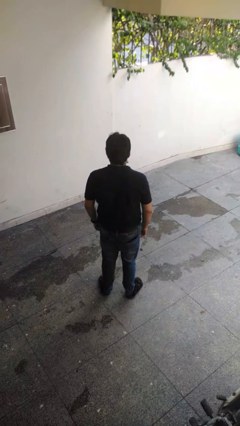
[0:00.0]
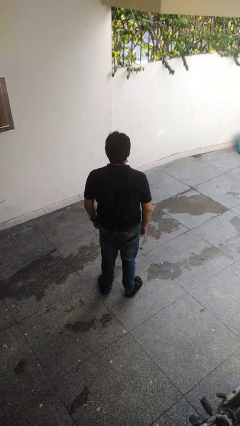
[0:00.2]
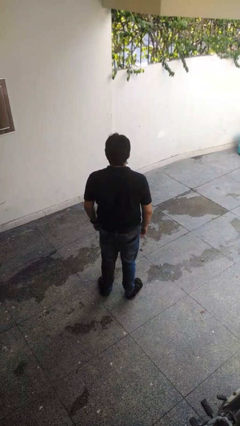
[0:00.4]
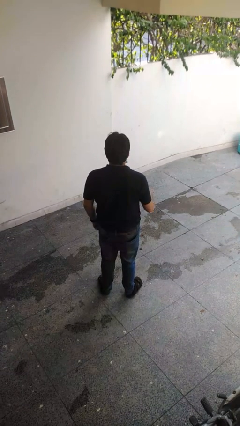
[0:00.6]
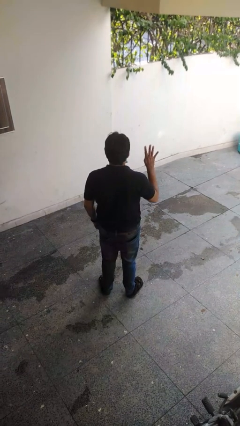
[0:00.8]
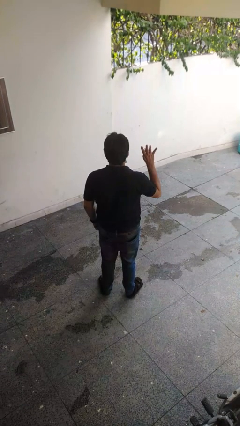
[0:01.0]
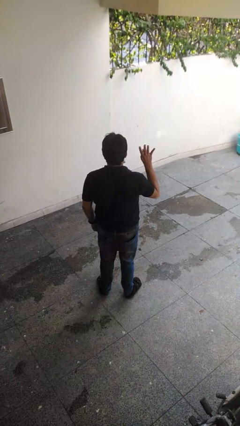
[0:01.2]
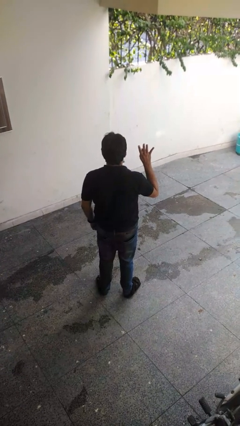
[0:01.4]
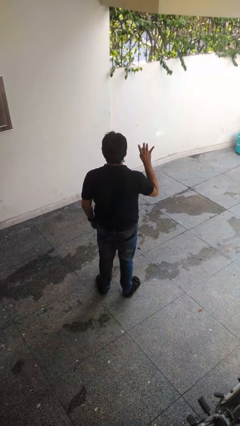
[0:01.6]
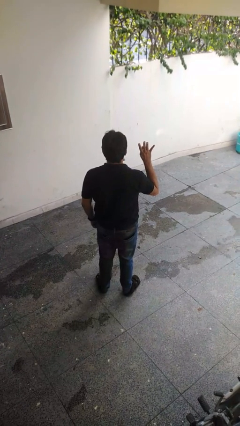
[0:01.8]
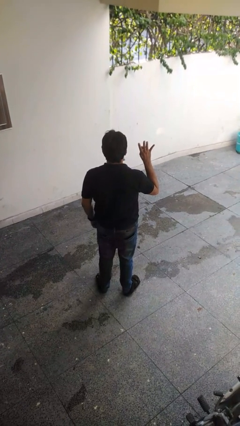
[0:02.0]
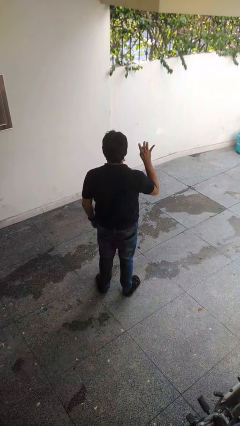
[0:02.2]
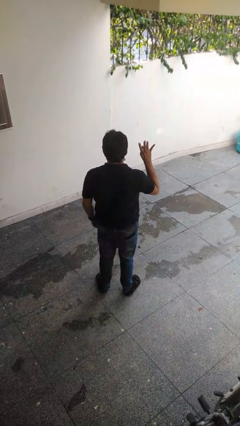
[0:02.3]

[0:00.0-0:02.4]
person gestures number four

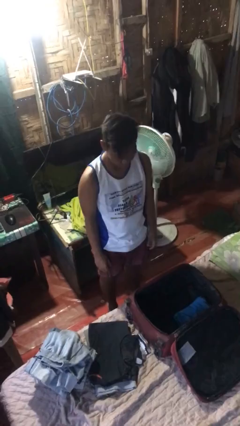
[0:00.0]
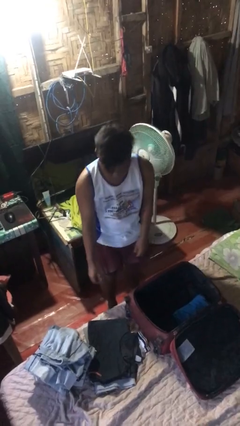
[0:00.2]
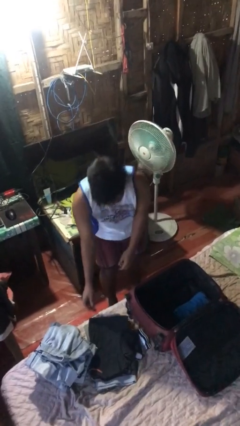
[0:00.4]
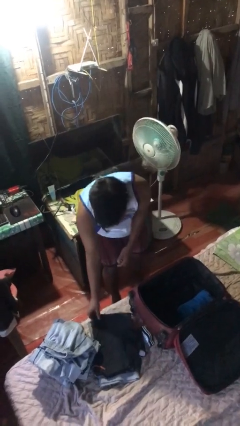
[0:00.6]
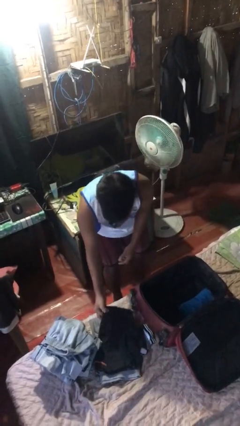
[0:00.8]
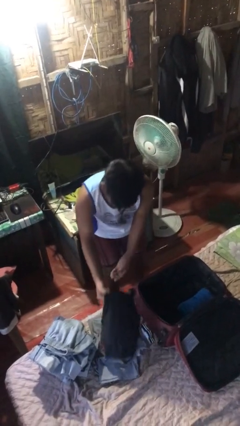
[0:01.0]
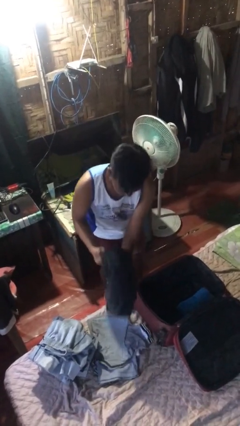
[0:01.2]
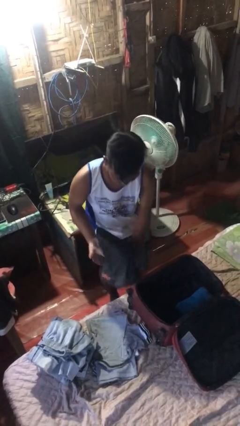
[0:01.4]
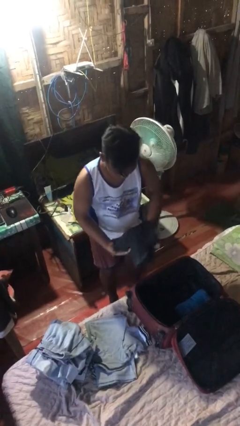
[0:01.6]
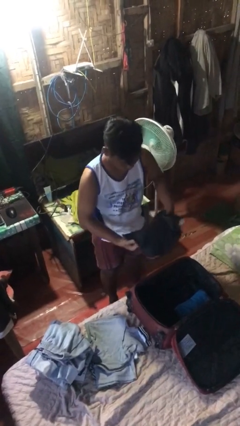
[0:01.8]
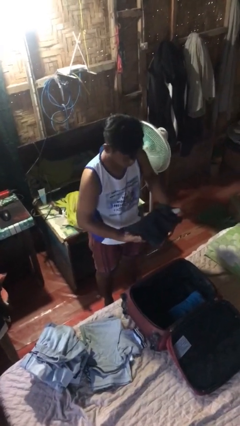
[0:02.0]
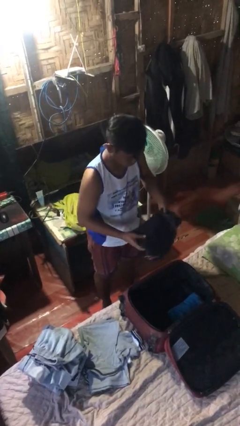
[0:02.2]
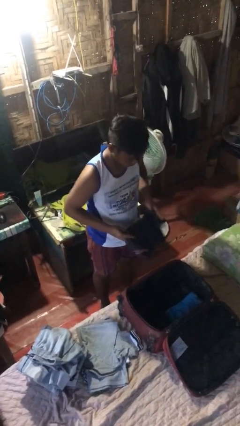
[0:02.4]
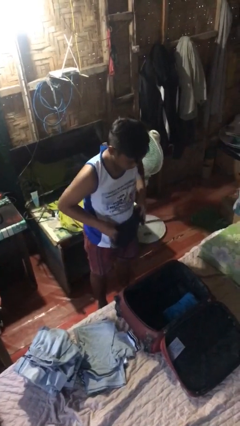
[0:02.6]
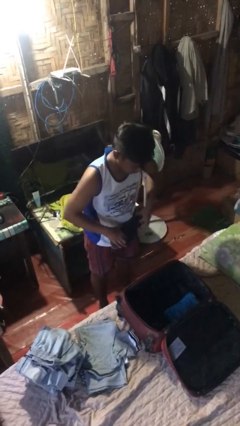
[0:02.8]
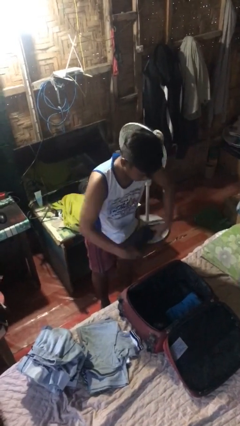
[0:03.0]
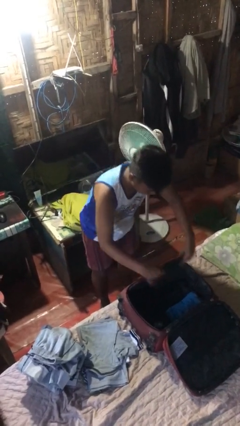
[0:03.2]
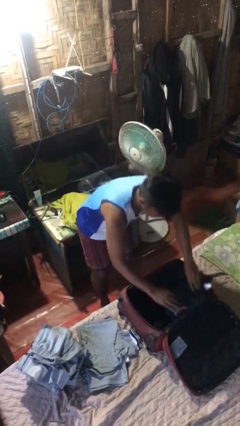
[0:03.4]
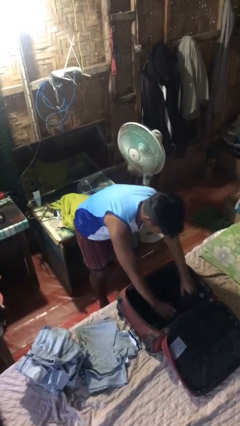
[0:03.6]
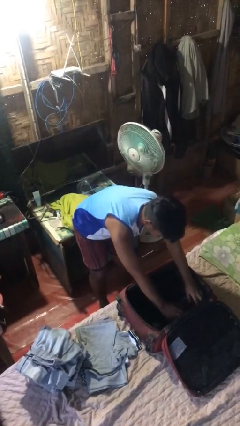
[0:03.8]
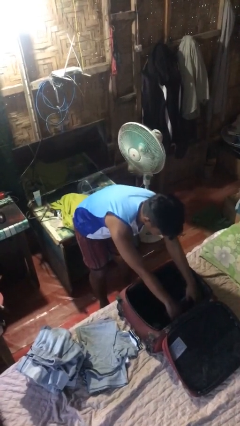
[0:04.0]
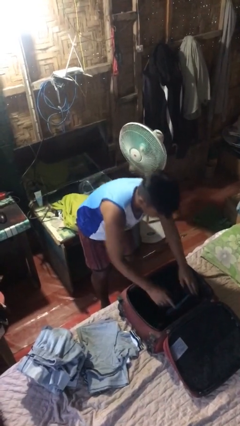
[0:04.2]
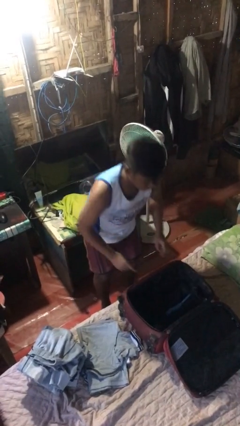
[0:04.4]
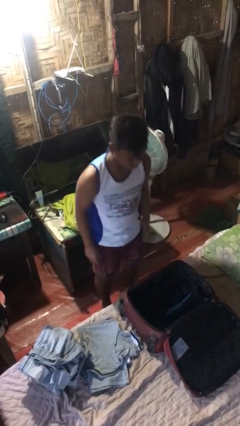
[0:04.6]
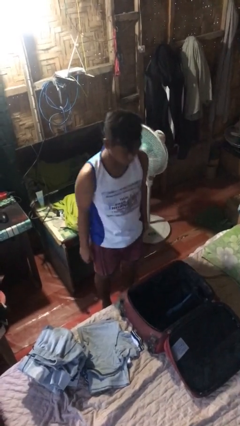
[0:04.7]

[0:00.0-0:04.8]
person loads clothes into suitcase

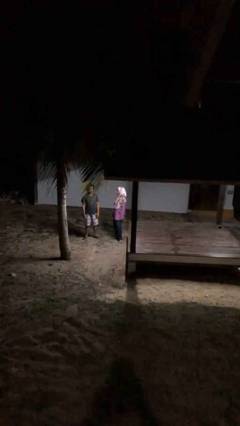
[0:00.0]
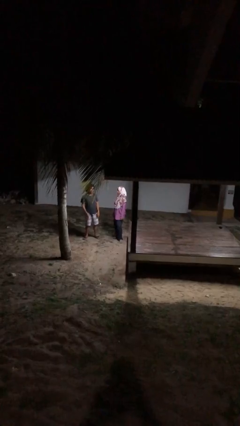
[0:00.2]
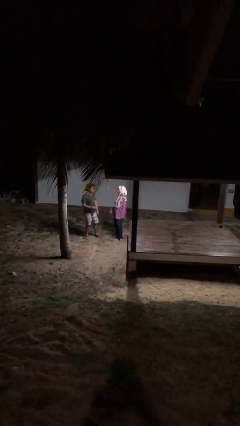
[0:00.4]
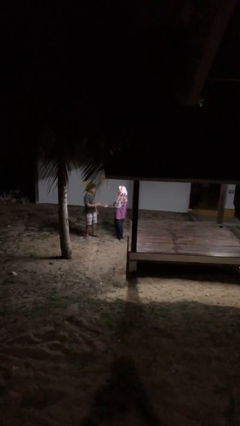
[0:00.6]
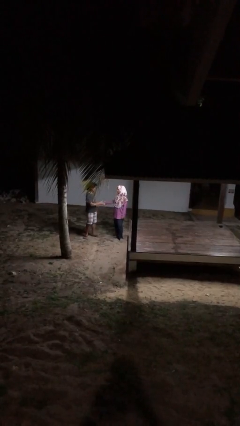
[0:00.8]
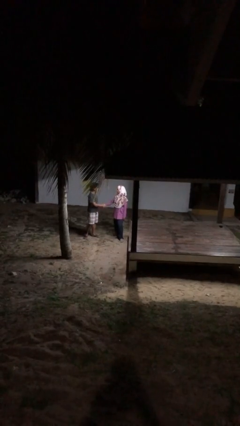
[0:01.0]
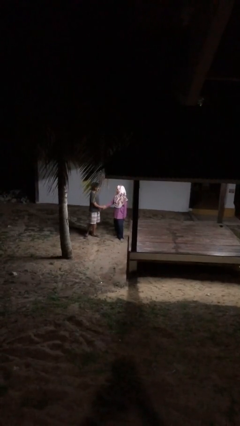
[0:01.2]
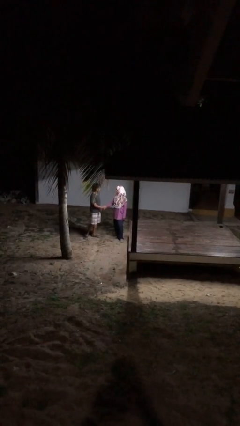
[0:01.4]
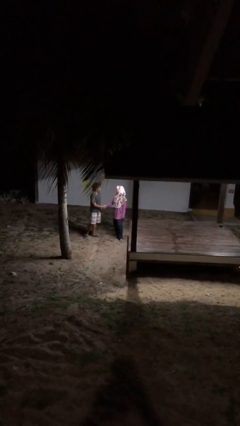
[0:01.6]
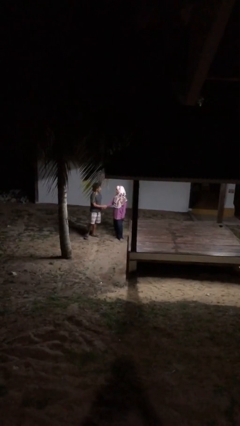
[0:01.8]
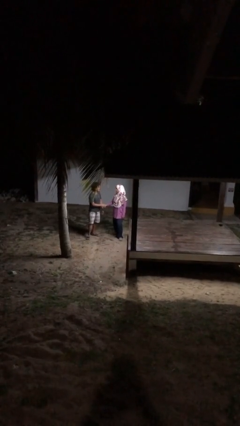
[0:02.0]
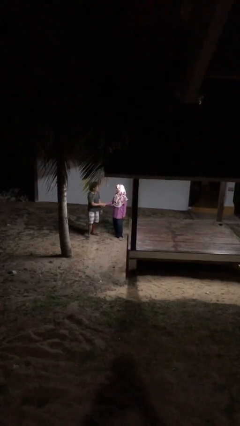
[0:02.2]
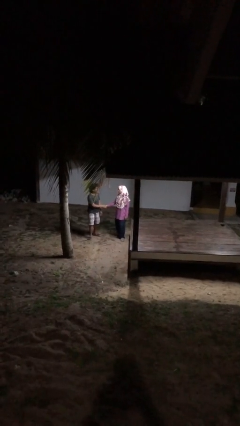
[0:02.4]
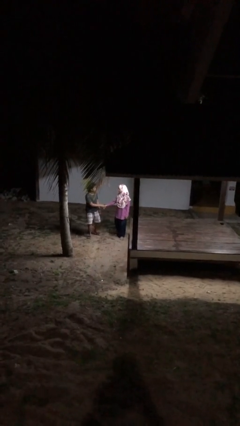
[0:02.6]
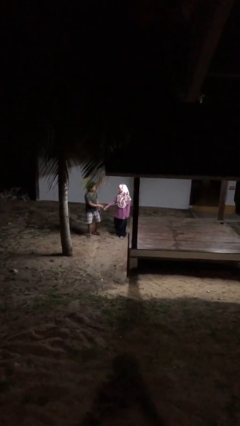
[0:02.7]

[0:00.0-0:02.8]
person shakes hand

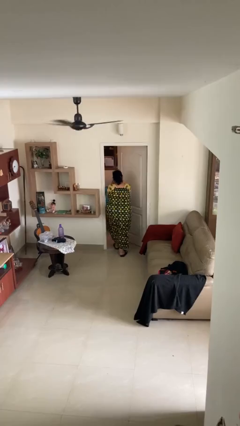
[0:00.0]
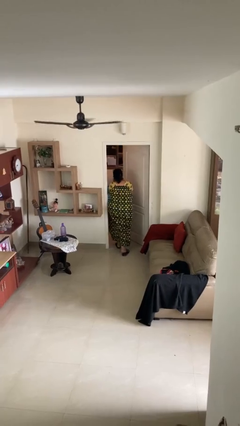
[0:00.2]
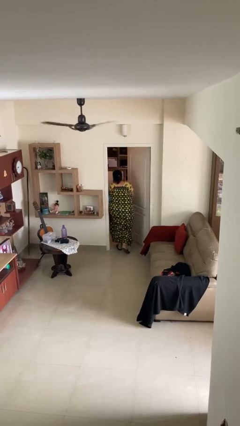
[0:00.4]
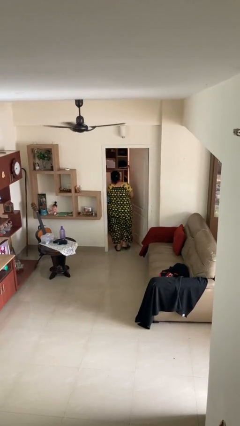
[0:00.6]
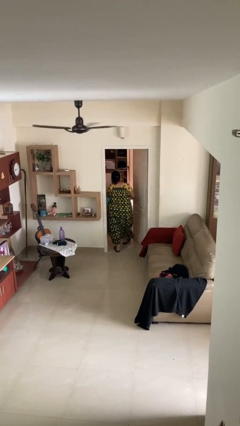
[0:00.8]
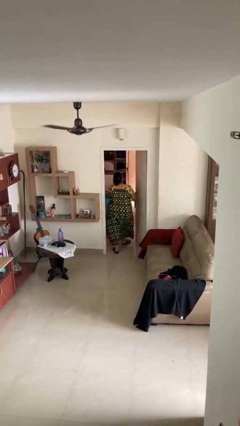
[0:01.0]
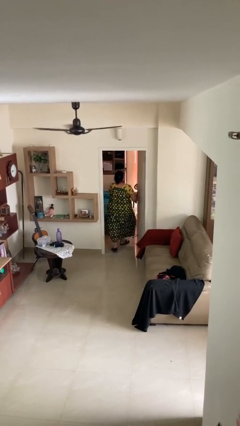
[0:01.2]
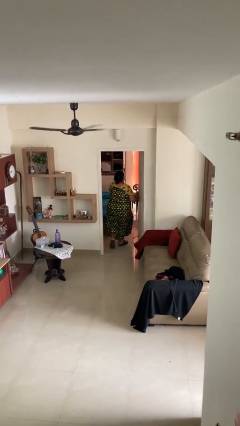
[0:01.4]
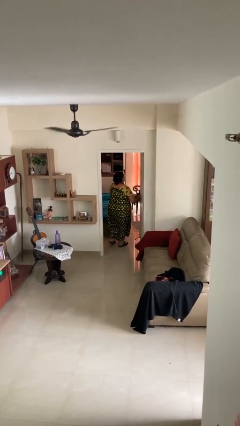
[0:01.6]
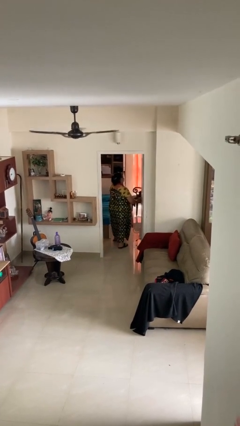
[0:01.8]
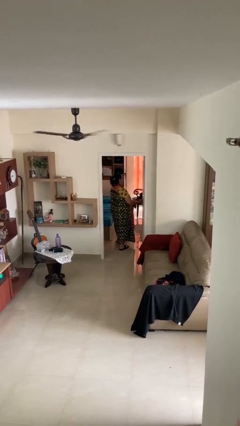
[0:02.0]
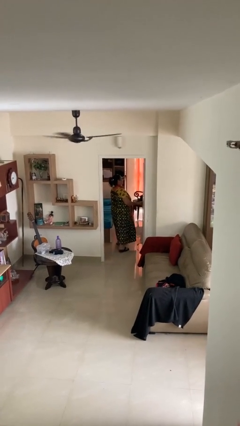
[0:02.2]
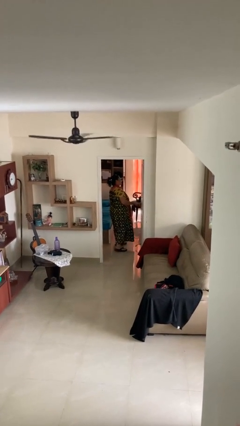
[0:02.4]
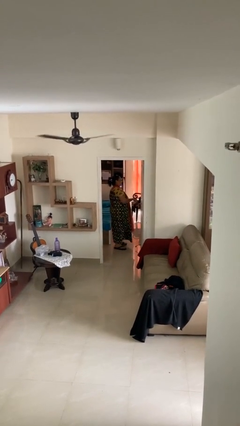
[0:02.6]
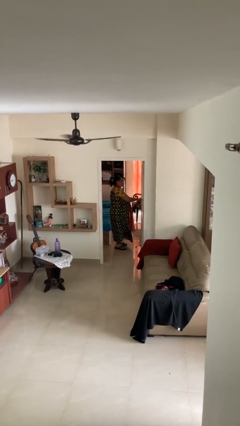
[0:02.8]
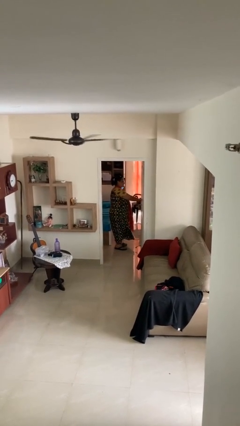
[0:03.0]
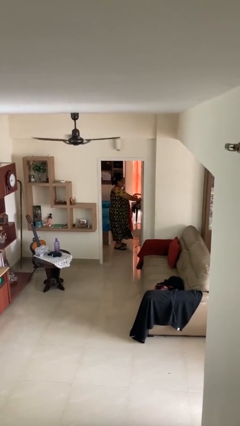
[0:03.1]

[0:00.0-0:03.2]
person exits scene through structure

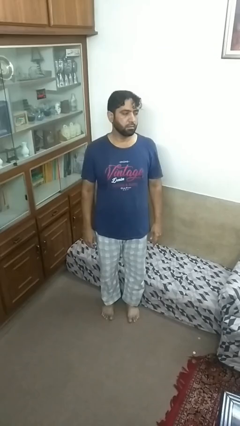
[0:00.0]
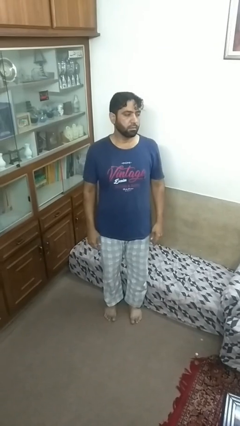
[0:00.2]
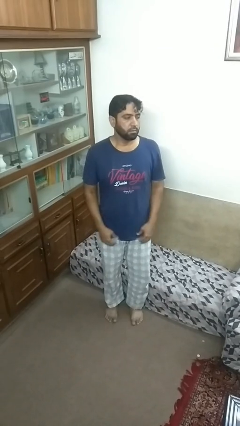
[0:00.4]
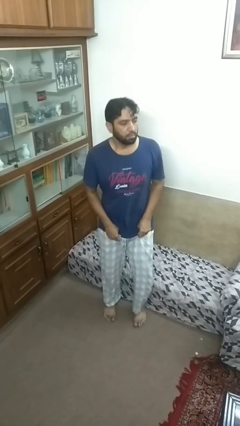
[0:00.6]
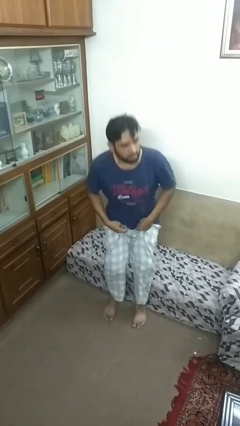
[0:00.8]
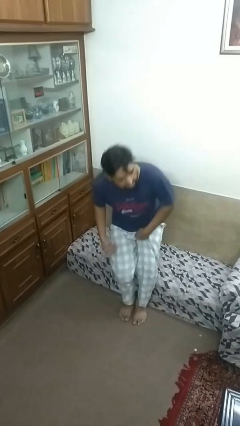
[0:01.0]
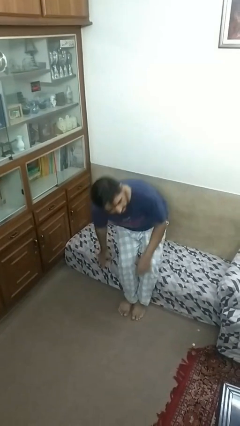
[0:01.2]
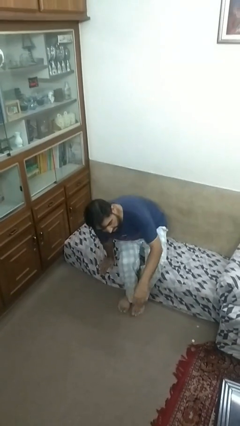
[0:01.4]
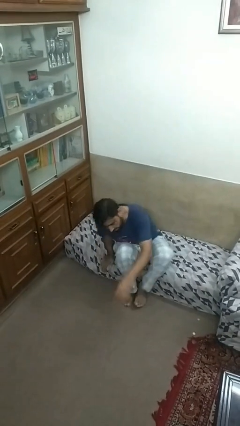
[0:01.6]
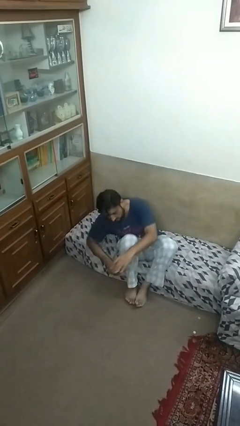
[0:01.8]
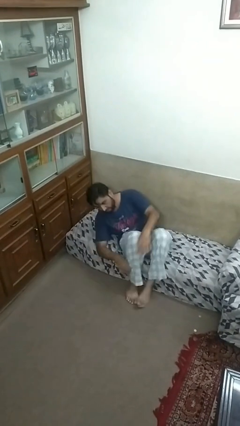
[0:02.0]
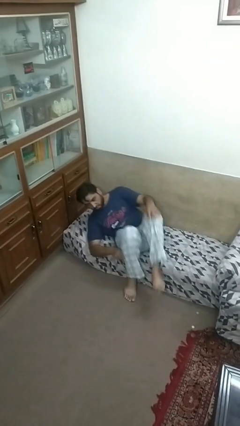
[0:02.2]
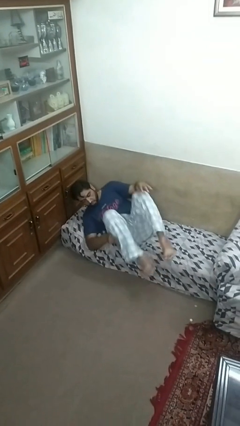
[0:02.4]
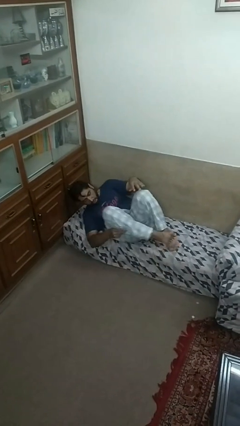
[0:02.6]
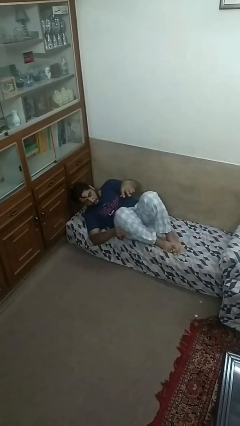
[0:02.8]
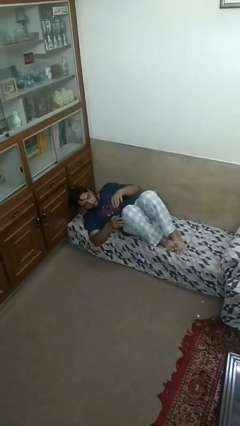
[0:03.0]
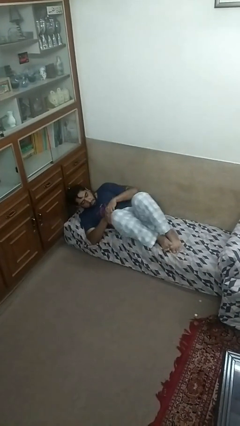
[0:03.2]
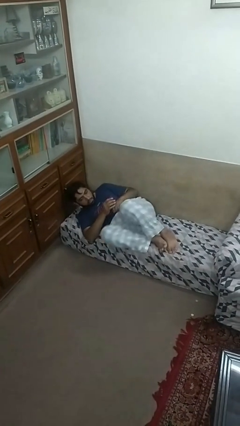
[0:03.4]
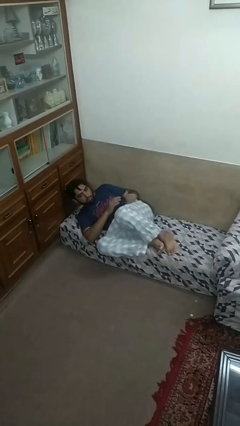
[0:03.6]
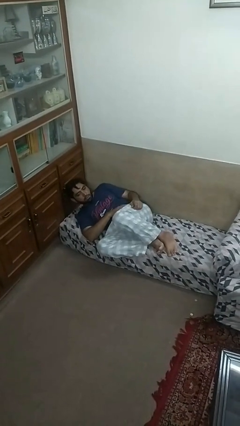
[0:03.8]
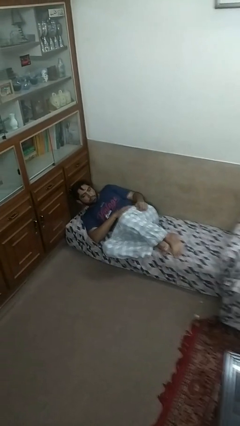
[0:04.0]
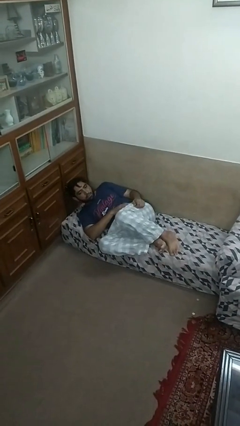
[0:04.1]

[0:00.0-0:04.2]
person lies down on couch

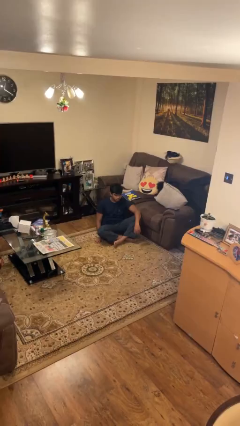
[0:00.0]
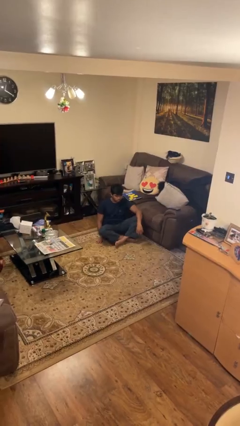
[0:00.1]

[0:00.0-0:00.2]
person stands up from floor
